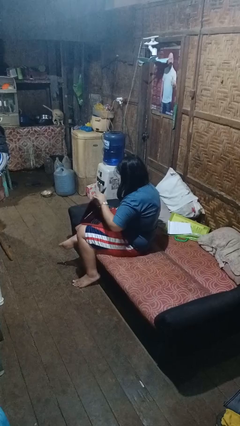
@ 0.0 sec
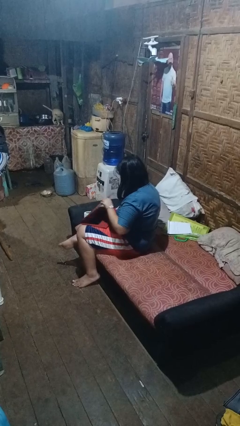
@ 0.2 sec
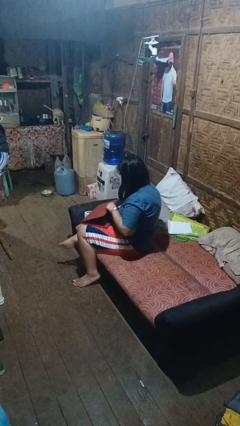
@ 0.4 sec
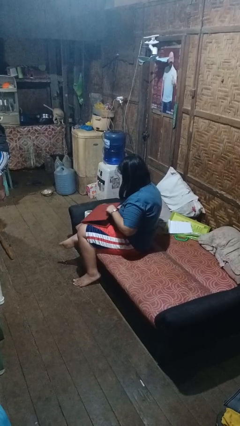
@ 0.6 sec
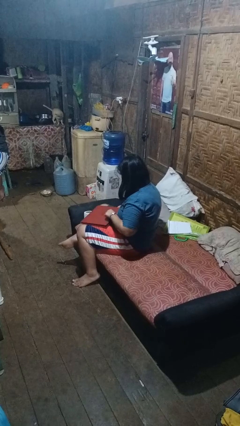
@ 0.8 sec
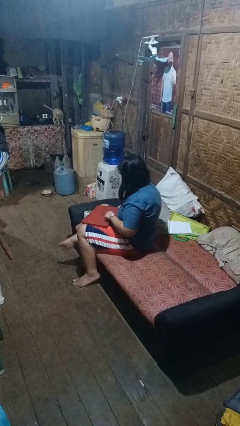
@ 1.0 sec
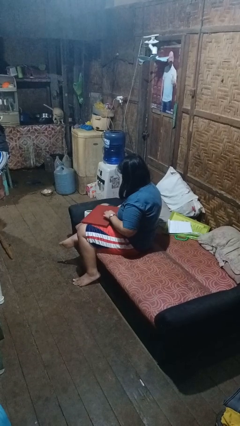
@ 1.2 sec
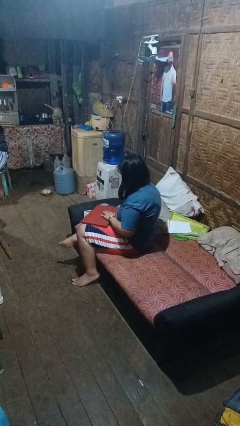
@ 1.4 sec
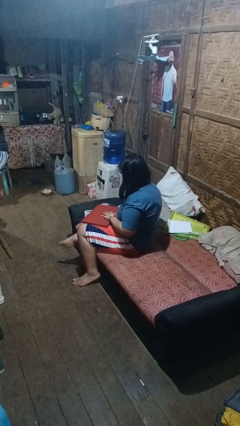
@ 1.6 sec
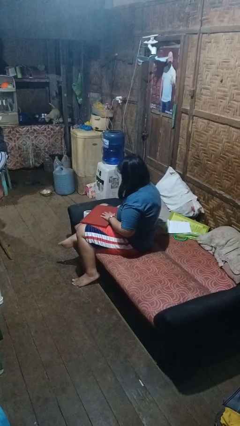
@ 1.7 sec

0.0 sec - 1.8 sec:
person closes laptop

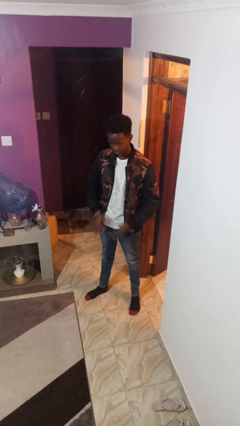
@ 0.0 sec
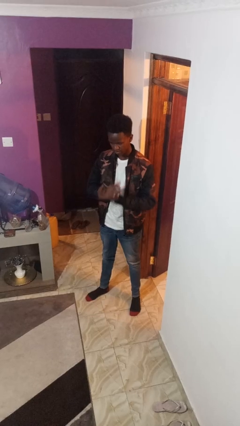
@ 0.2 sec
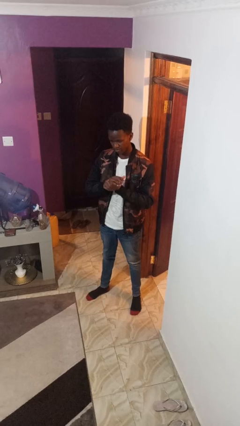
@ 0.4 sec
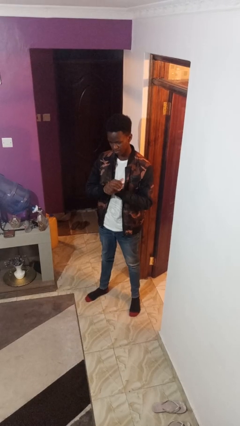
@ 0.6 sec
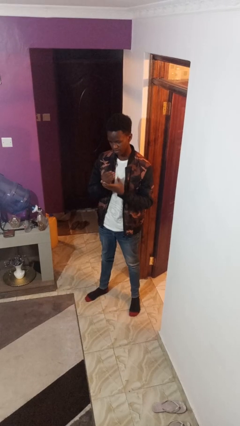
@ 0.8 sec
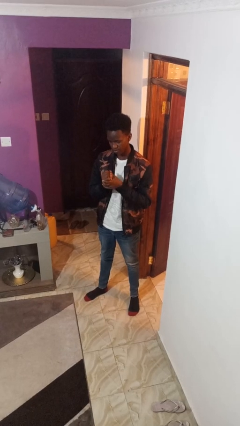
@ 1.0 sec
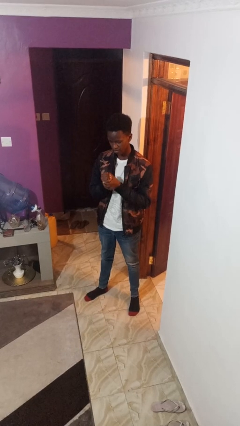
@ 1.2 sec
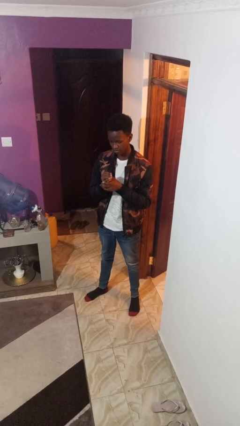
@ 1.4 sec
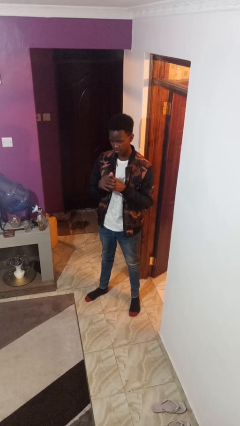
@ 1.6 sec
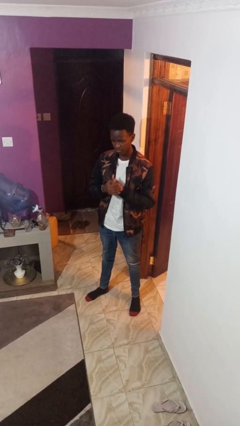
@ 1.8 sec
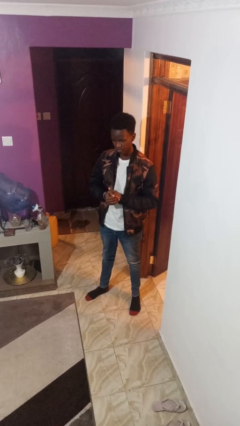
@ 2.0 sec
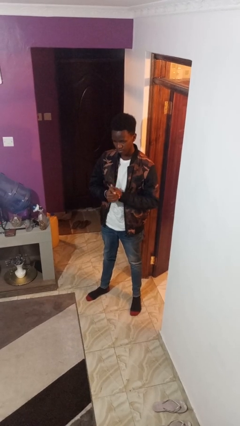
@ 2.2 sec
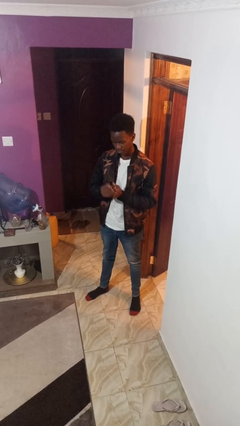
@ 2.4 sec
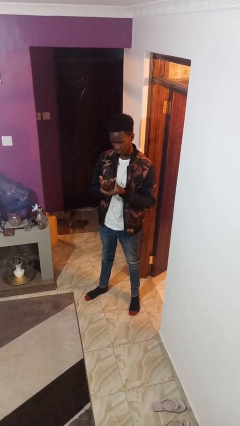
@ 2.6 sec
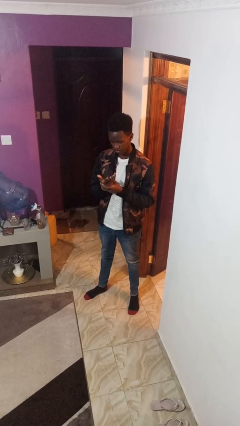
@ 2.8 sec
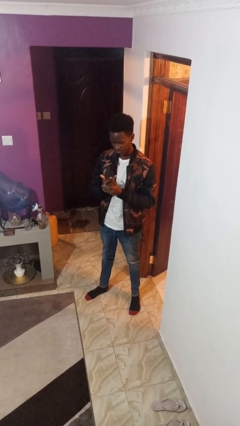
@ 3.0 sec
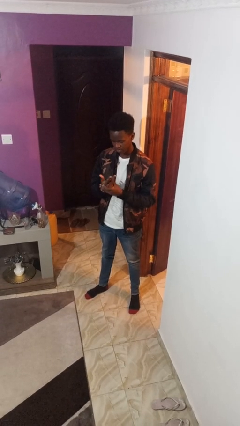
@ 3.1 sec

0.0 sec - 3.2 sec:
person cracks knuckles

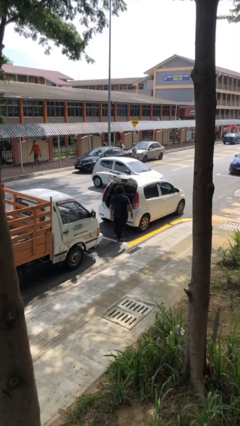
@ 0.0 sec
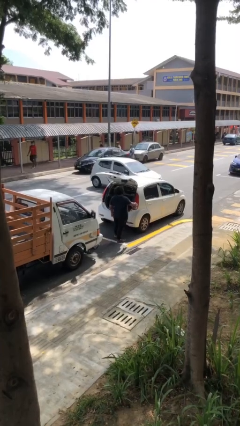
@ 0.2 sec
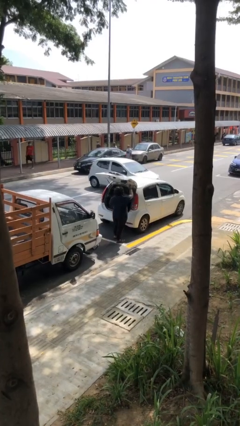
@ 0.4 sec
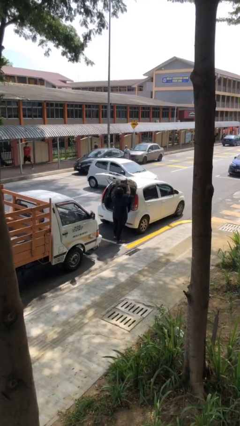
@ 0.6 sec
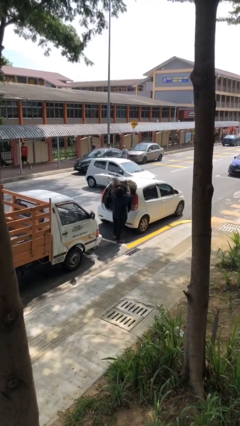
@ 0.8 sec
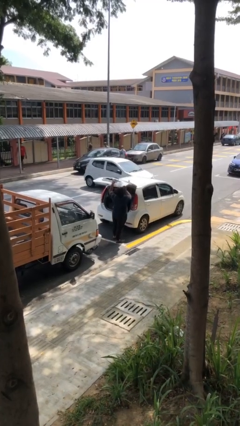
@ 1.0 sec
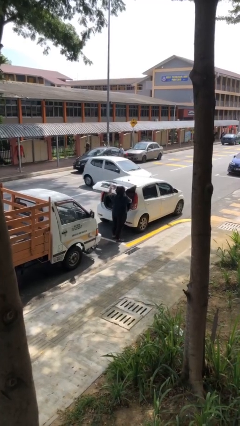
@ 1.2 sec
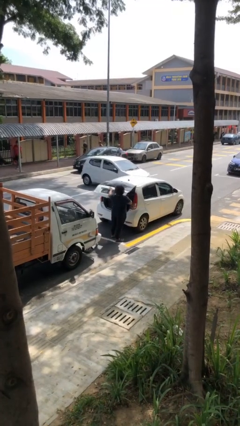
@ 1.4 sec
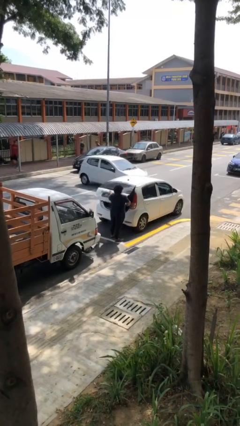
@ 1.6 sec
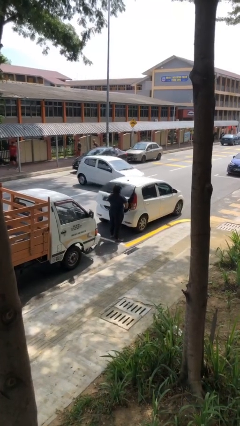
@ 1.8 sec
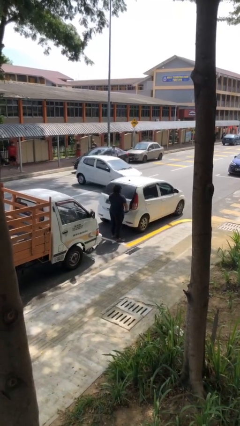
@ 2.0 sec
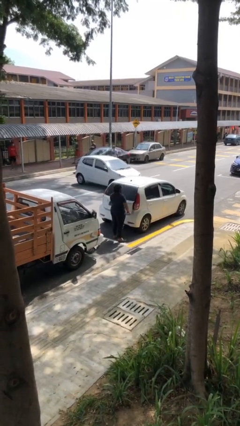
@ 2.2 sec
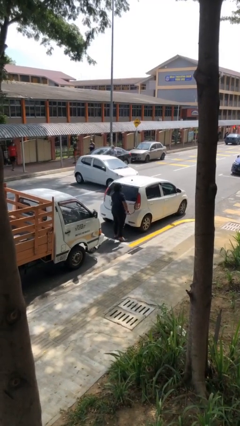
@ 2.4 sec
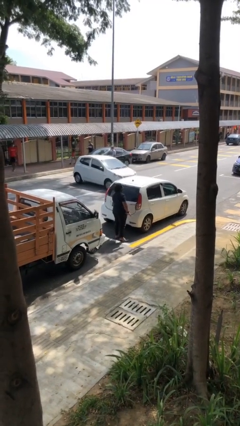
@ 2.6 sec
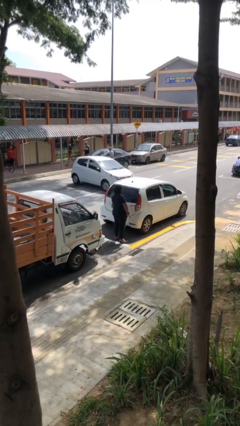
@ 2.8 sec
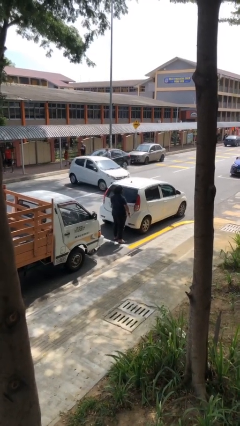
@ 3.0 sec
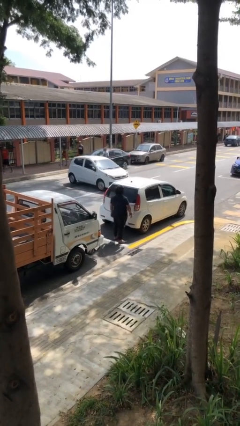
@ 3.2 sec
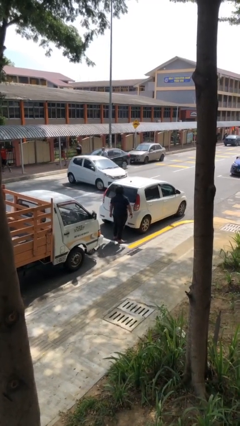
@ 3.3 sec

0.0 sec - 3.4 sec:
person closes car trunk

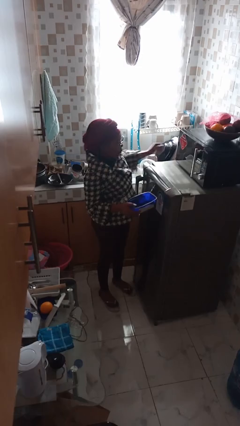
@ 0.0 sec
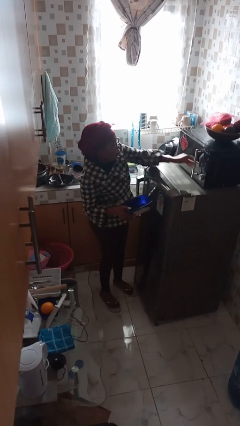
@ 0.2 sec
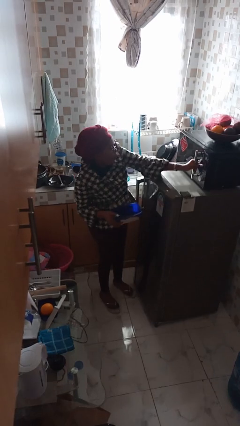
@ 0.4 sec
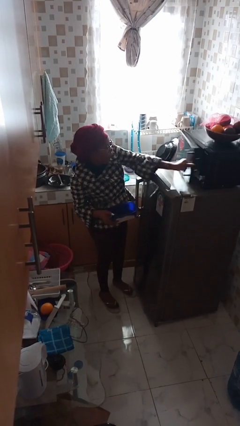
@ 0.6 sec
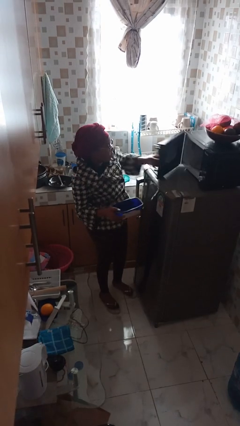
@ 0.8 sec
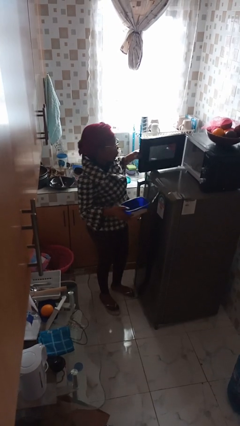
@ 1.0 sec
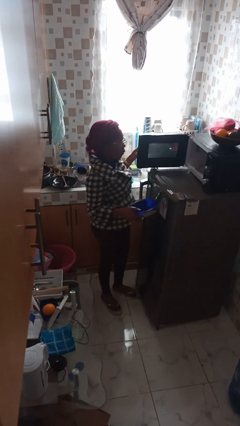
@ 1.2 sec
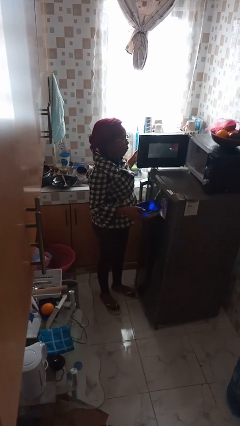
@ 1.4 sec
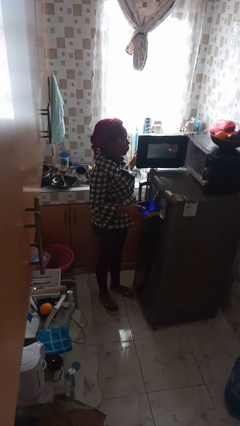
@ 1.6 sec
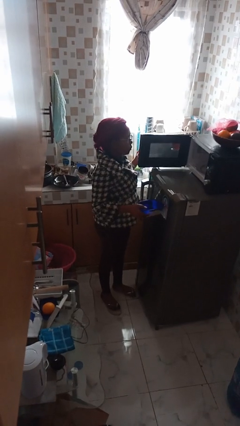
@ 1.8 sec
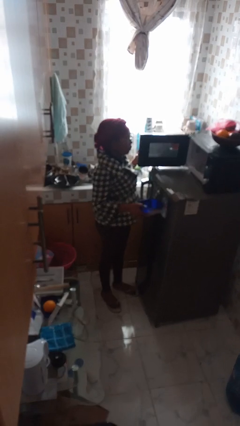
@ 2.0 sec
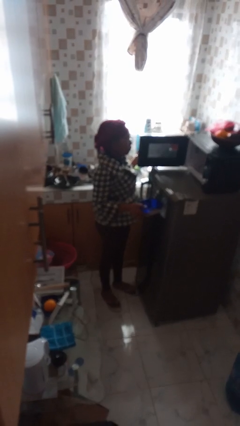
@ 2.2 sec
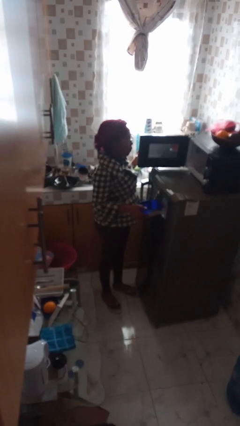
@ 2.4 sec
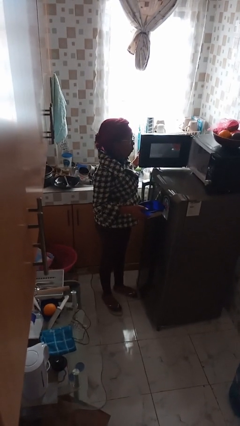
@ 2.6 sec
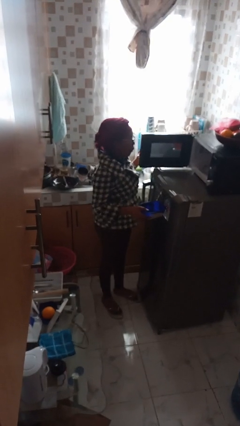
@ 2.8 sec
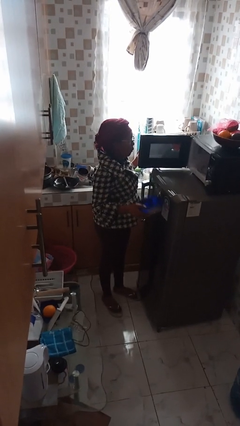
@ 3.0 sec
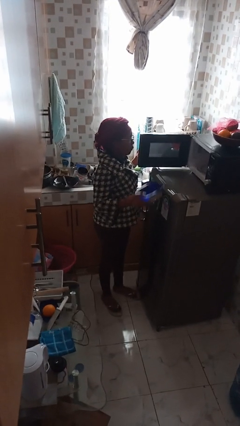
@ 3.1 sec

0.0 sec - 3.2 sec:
person opens microwave

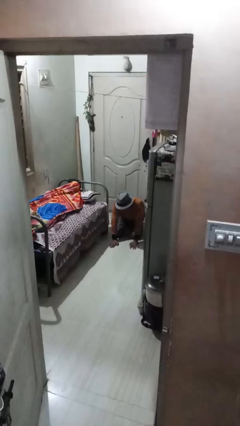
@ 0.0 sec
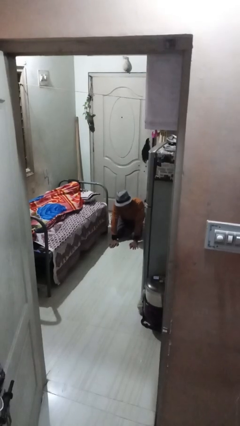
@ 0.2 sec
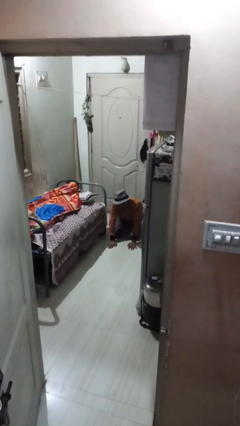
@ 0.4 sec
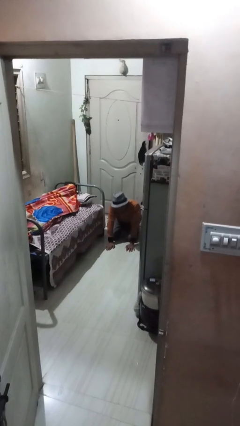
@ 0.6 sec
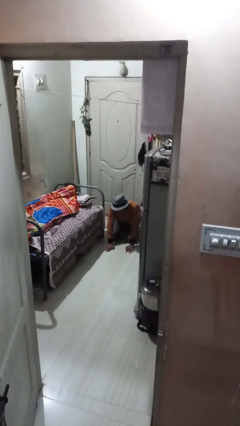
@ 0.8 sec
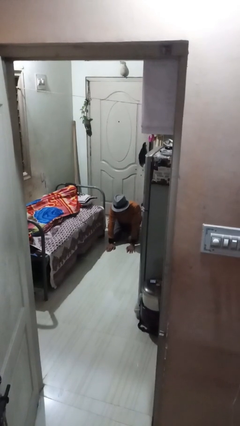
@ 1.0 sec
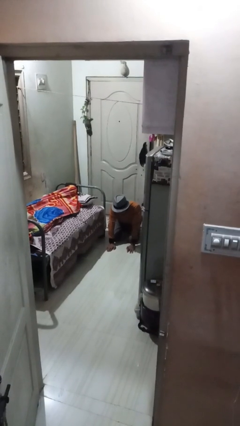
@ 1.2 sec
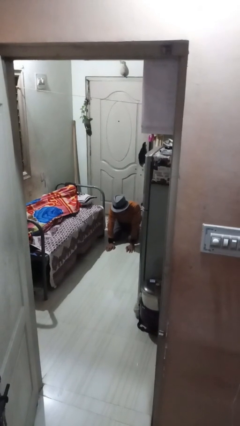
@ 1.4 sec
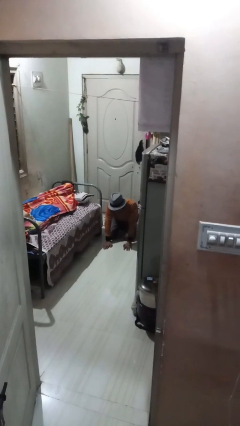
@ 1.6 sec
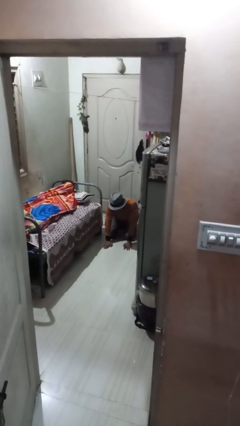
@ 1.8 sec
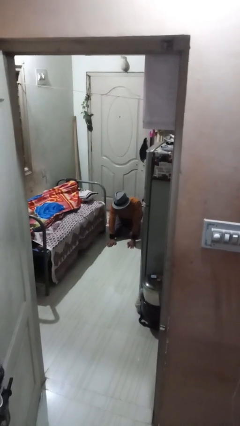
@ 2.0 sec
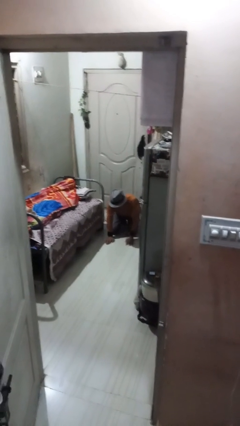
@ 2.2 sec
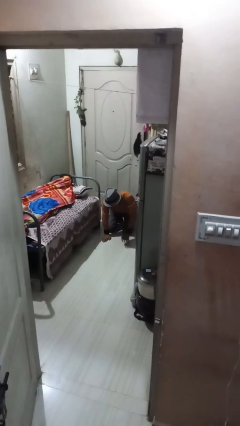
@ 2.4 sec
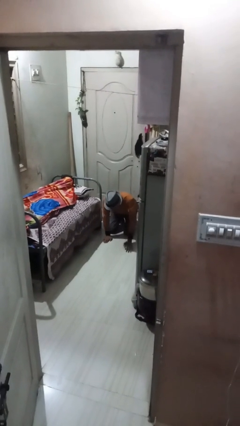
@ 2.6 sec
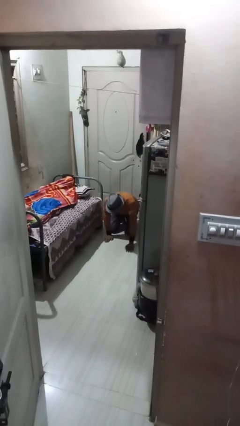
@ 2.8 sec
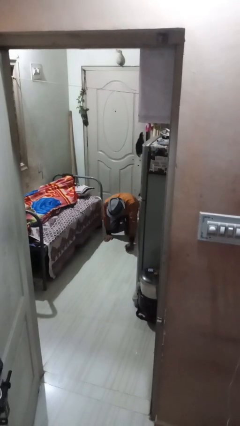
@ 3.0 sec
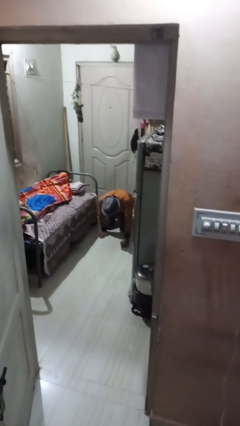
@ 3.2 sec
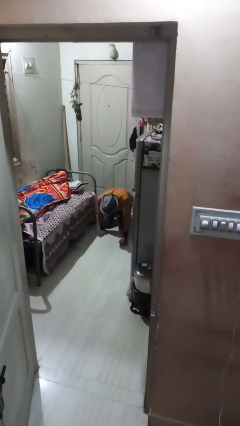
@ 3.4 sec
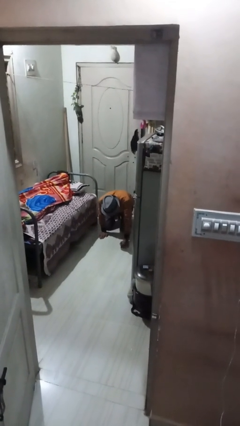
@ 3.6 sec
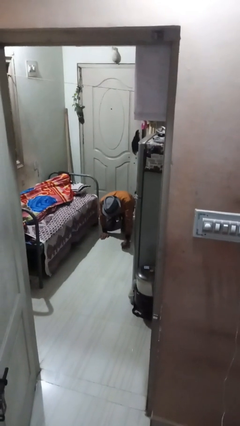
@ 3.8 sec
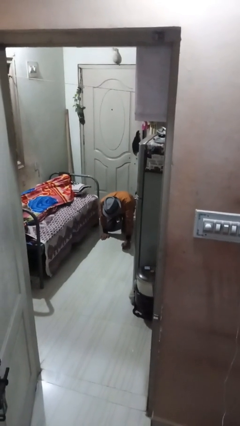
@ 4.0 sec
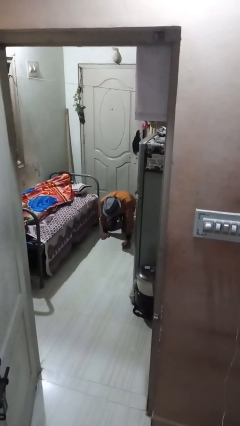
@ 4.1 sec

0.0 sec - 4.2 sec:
person crawls

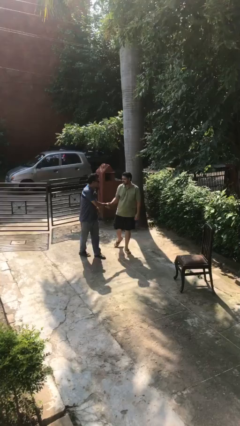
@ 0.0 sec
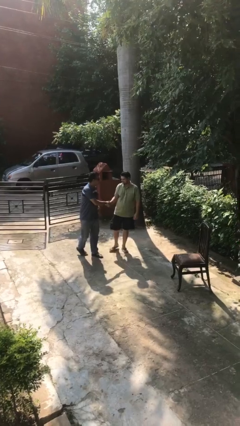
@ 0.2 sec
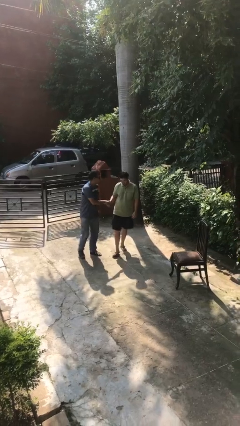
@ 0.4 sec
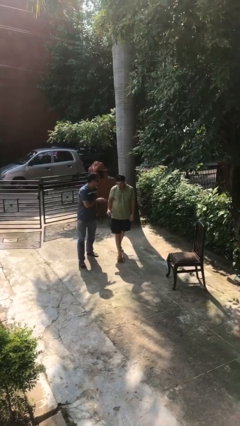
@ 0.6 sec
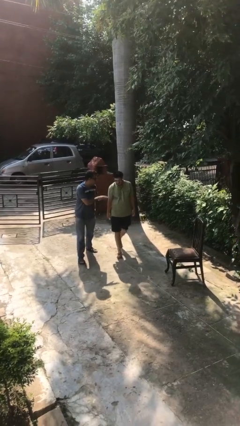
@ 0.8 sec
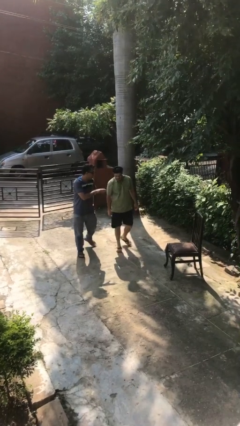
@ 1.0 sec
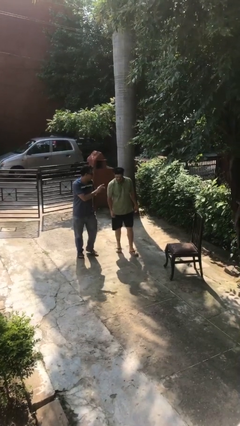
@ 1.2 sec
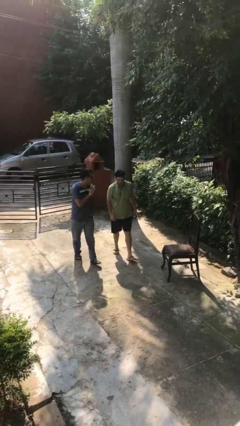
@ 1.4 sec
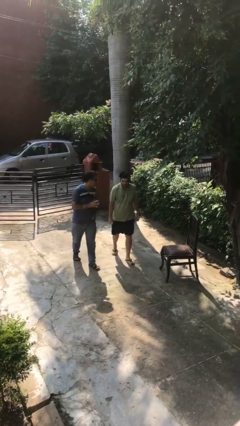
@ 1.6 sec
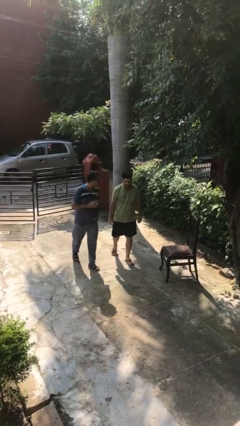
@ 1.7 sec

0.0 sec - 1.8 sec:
person shakes hand
